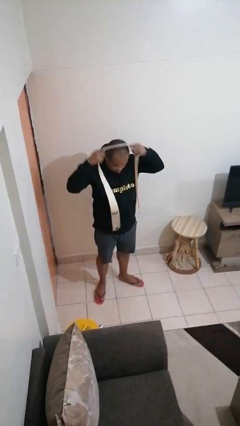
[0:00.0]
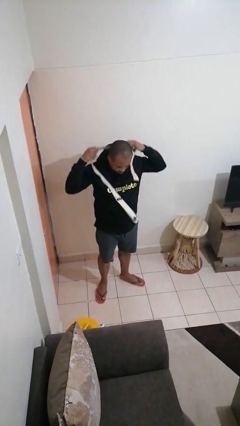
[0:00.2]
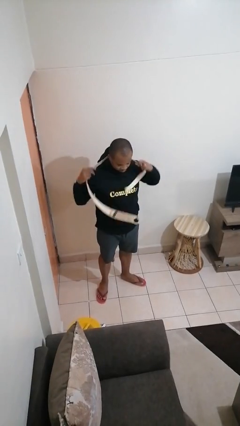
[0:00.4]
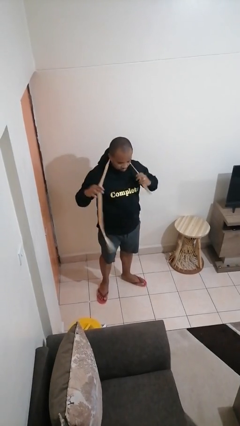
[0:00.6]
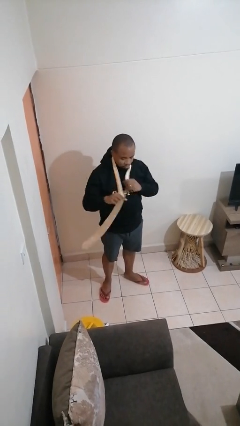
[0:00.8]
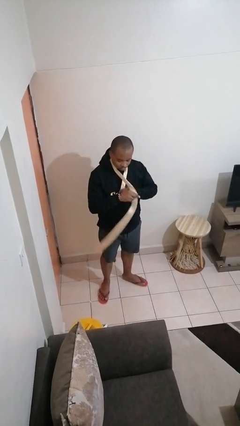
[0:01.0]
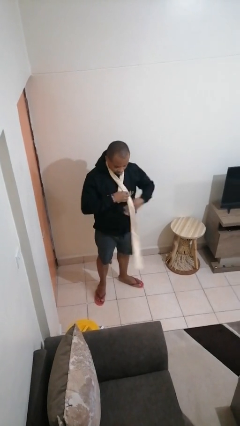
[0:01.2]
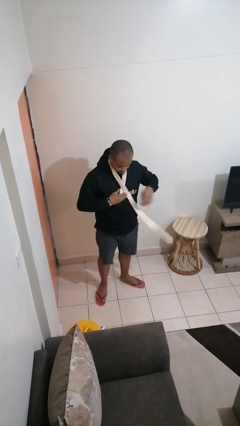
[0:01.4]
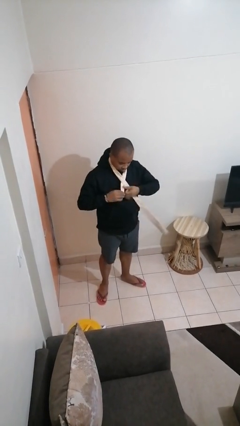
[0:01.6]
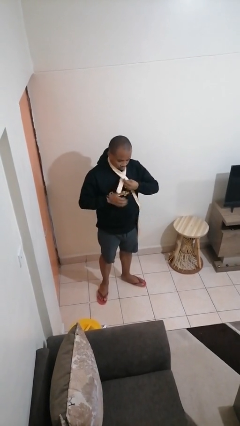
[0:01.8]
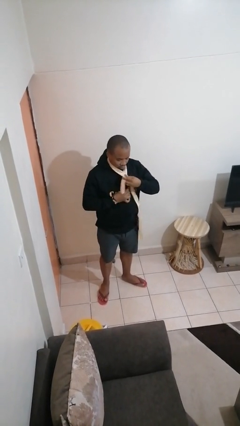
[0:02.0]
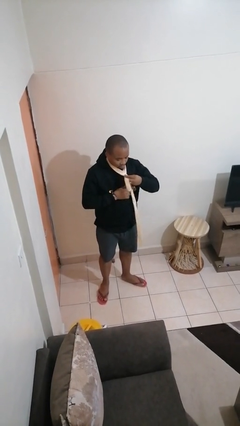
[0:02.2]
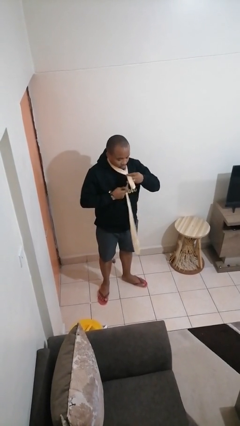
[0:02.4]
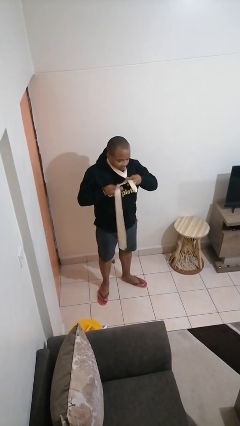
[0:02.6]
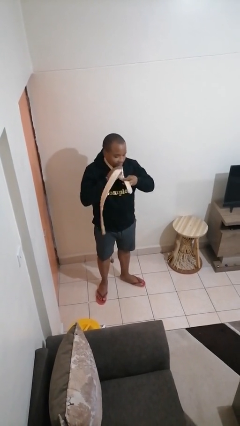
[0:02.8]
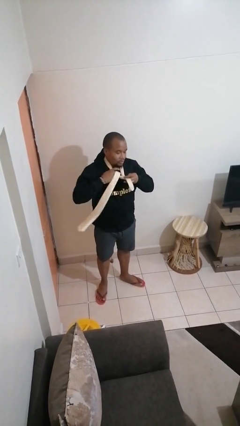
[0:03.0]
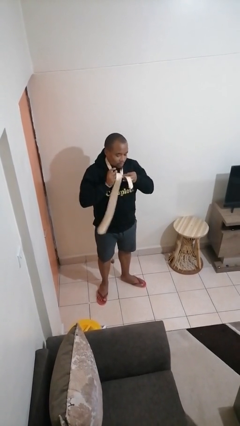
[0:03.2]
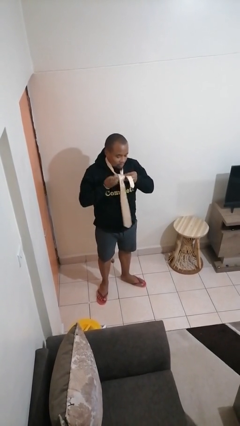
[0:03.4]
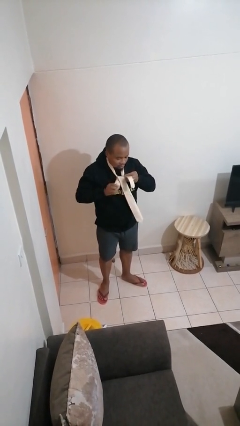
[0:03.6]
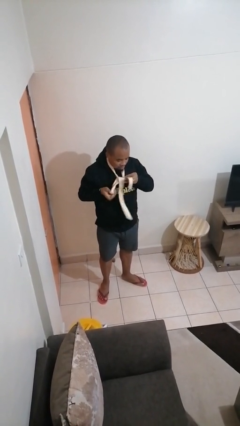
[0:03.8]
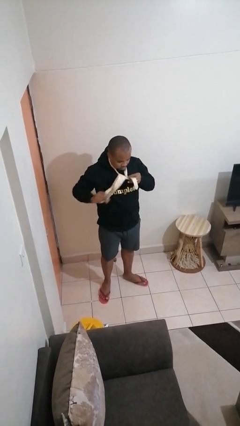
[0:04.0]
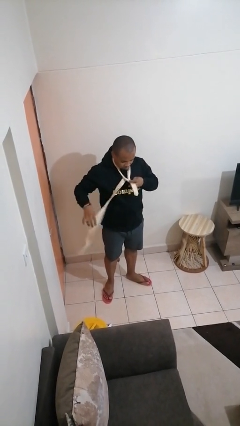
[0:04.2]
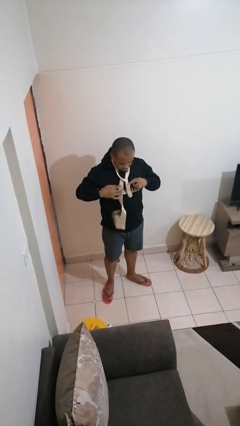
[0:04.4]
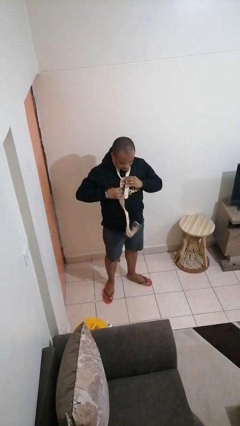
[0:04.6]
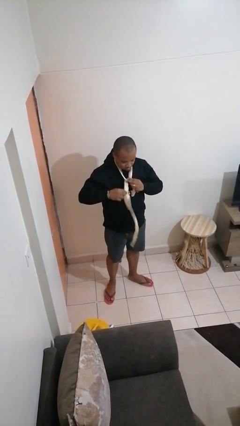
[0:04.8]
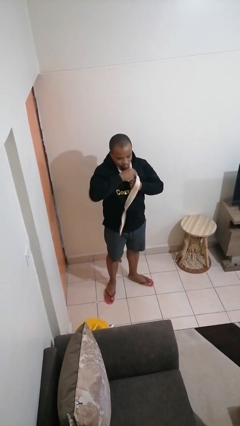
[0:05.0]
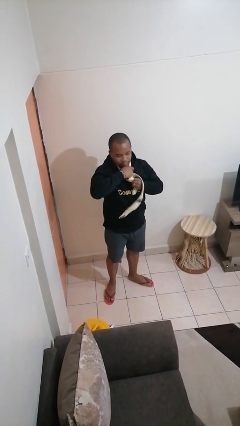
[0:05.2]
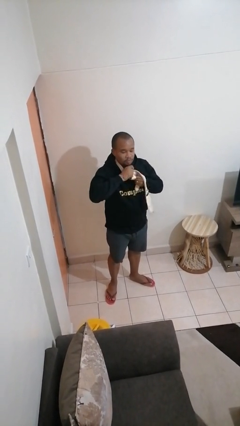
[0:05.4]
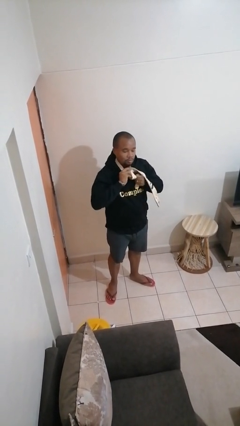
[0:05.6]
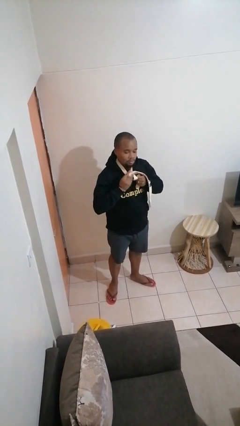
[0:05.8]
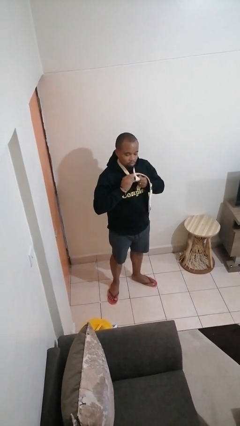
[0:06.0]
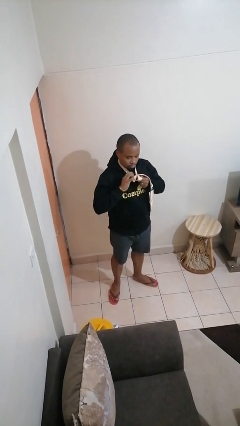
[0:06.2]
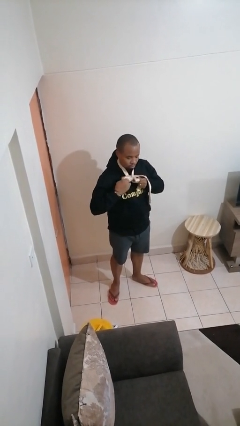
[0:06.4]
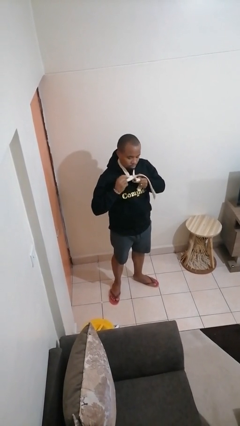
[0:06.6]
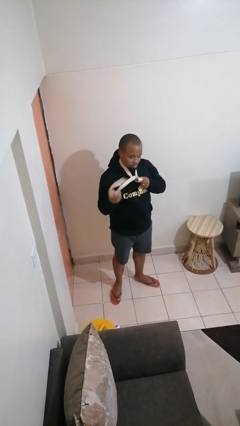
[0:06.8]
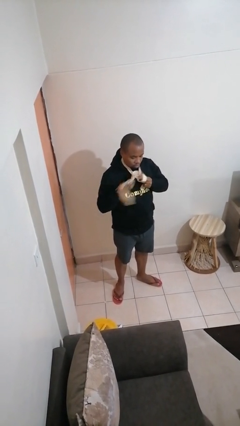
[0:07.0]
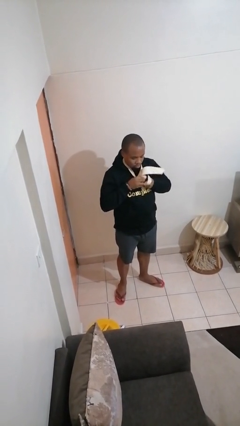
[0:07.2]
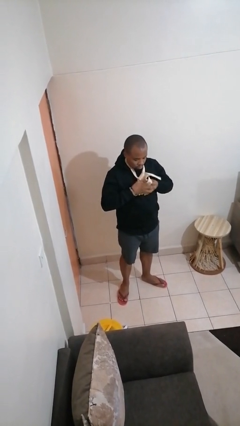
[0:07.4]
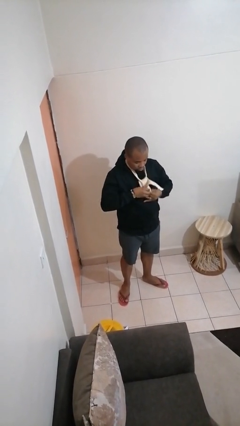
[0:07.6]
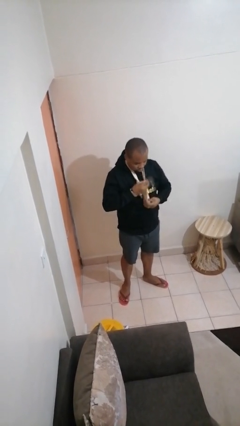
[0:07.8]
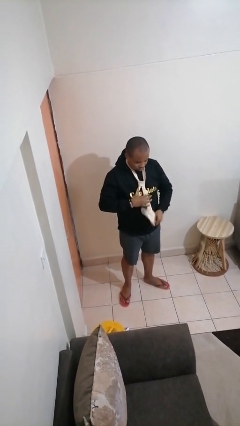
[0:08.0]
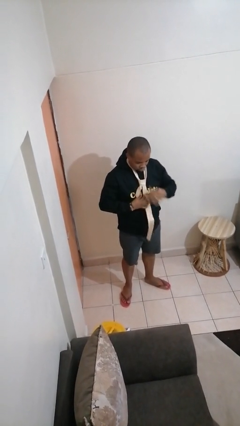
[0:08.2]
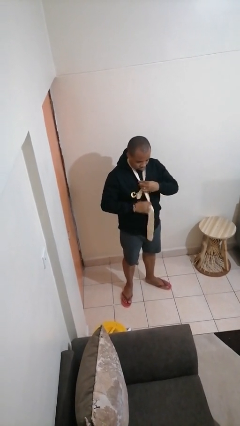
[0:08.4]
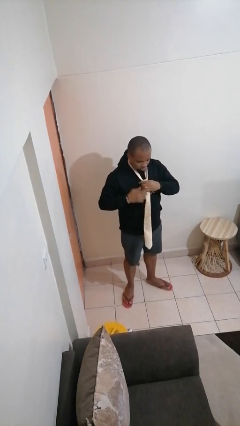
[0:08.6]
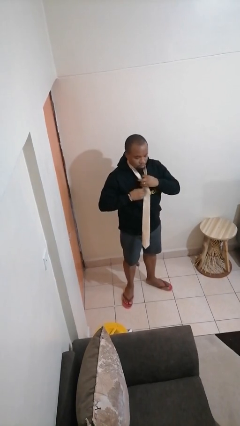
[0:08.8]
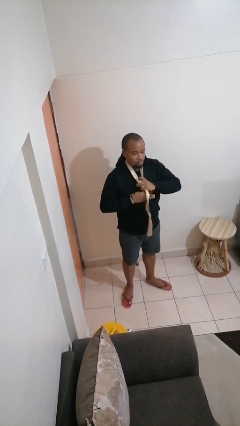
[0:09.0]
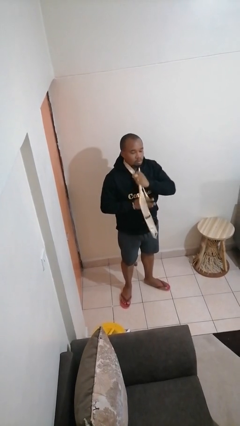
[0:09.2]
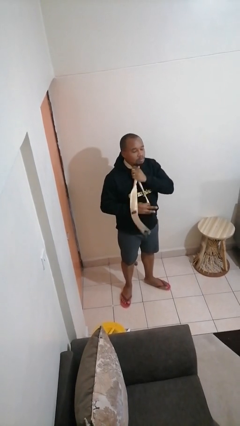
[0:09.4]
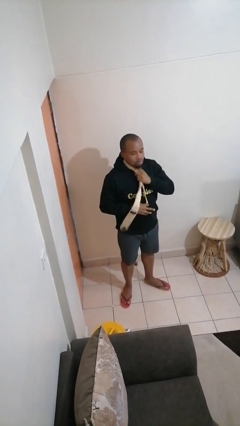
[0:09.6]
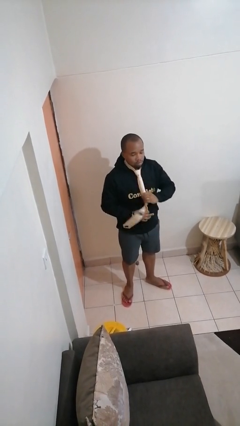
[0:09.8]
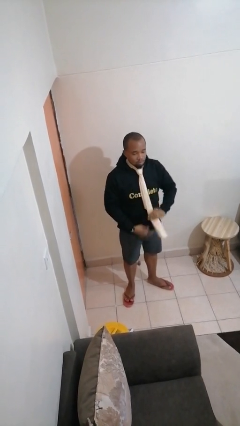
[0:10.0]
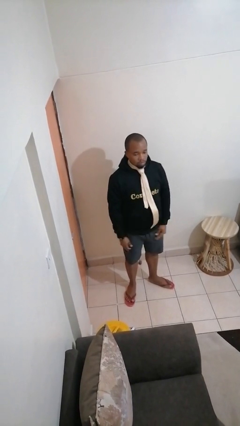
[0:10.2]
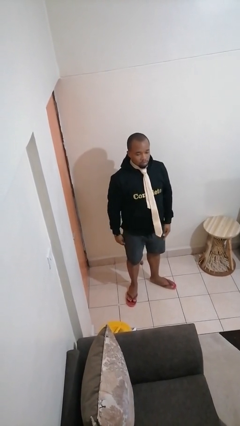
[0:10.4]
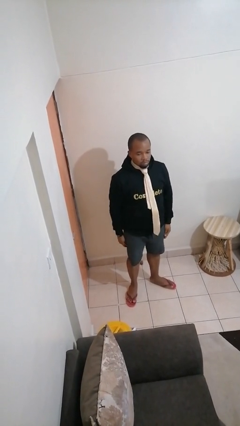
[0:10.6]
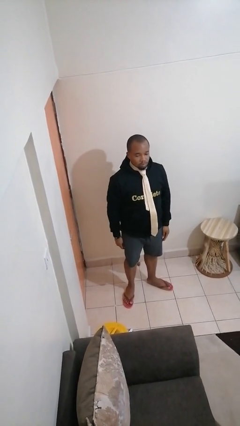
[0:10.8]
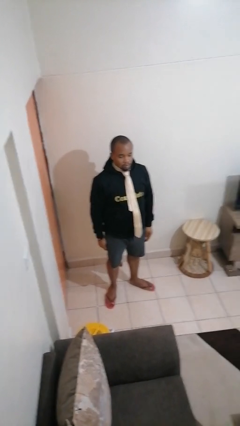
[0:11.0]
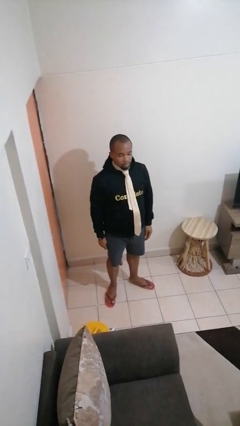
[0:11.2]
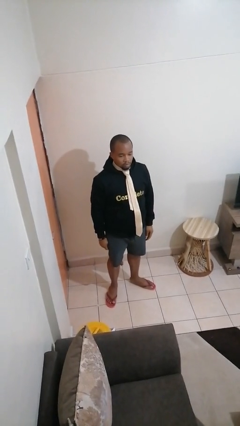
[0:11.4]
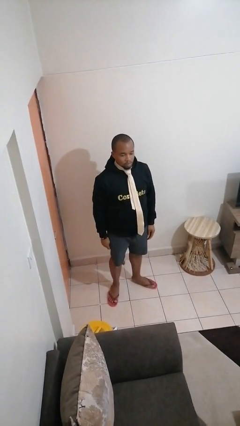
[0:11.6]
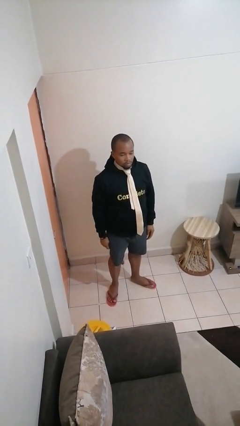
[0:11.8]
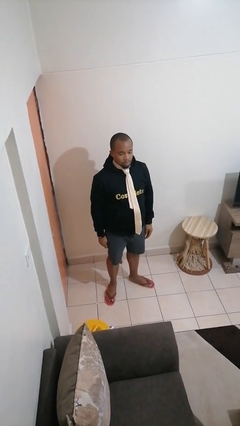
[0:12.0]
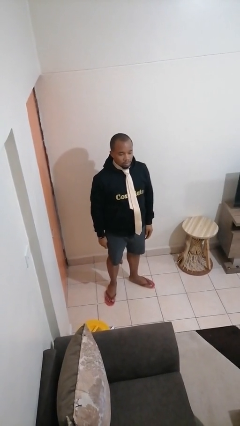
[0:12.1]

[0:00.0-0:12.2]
person puts on necktie

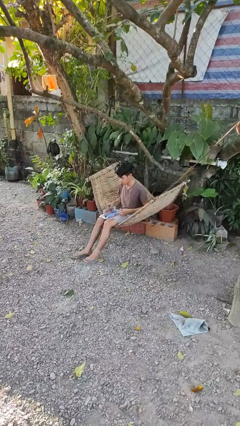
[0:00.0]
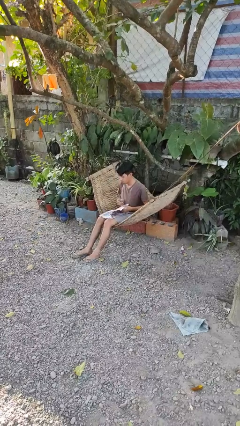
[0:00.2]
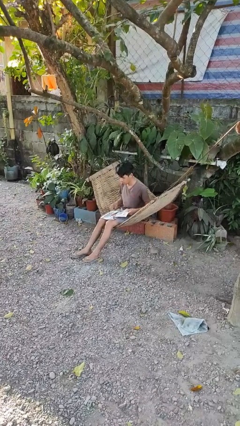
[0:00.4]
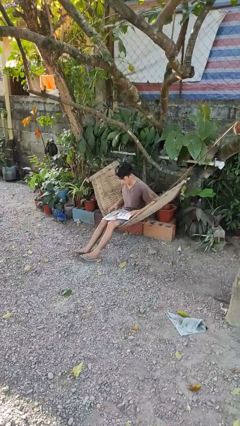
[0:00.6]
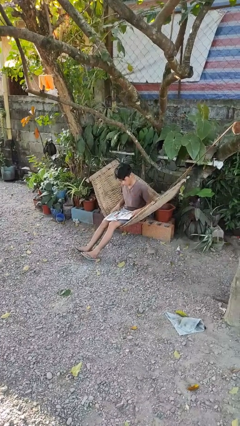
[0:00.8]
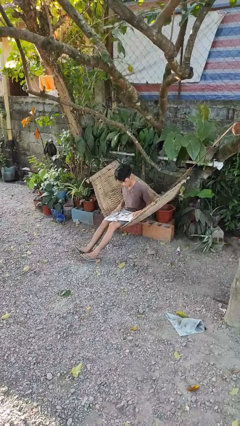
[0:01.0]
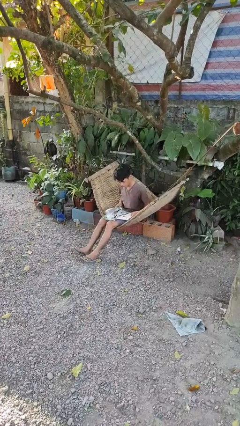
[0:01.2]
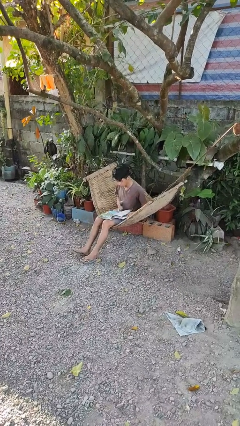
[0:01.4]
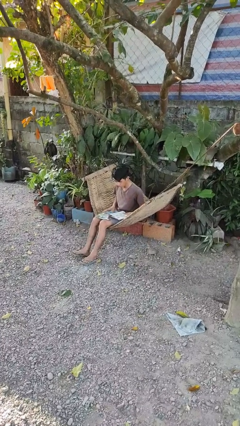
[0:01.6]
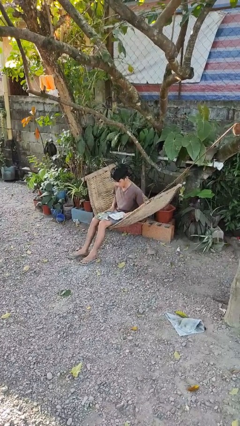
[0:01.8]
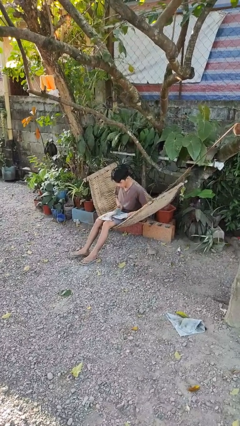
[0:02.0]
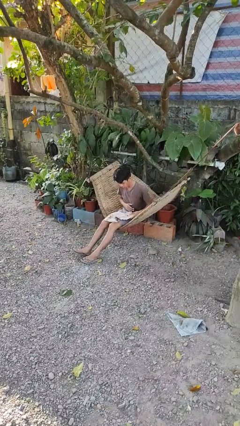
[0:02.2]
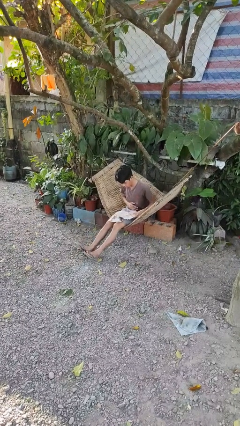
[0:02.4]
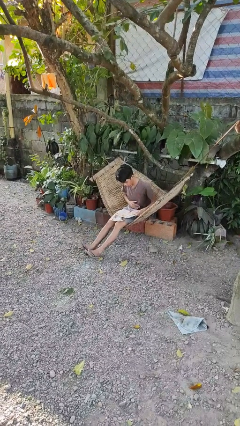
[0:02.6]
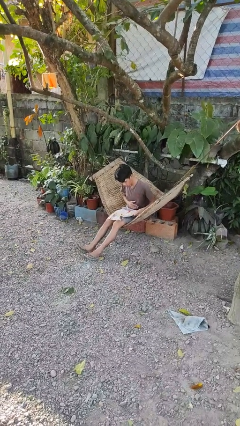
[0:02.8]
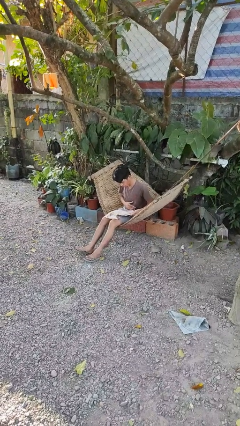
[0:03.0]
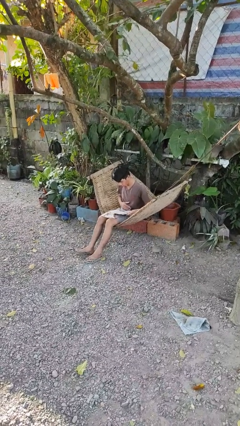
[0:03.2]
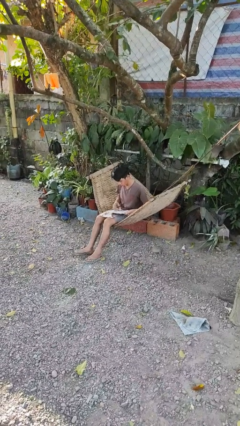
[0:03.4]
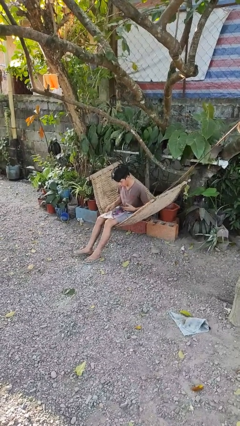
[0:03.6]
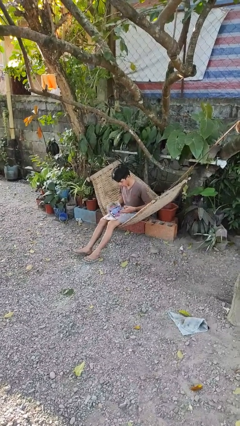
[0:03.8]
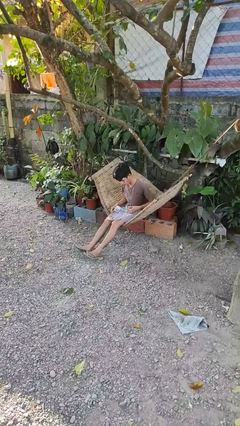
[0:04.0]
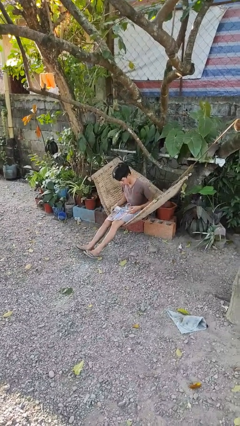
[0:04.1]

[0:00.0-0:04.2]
person reads magazine

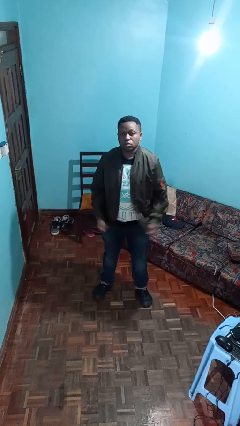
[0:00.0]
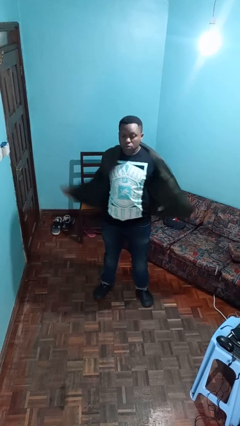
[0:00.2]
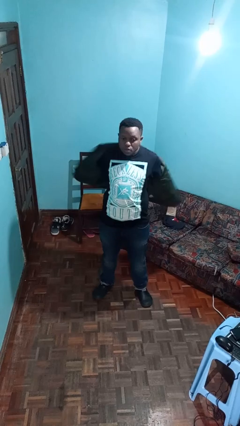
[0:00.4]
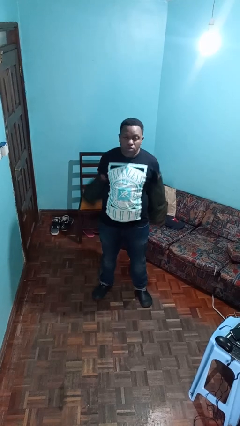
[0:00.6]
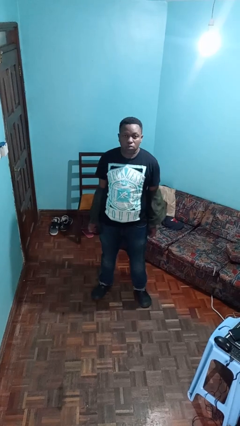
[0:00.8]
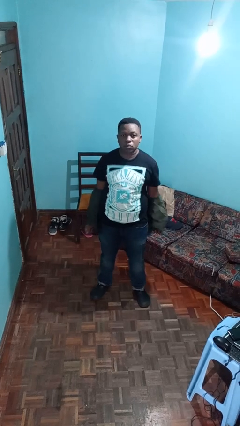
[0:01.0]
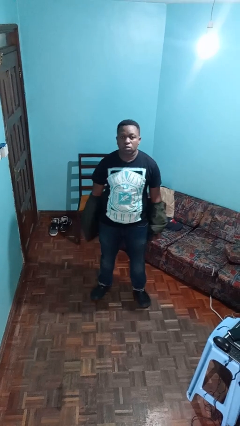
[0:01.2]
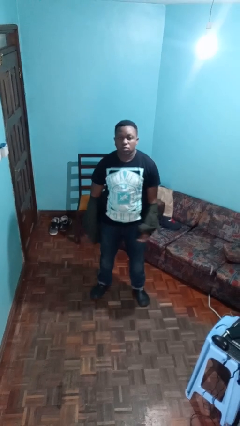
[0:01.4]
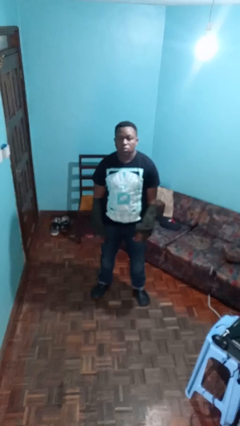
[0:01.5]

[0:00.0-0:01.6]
person takes off jacket

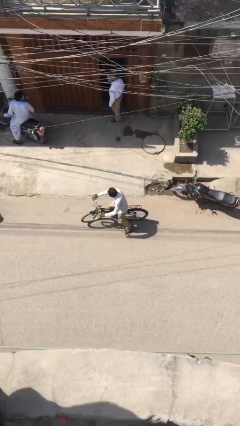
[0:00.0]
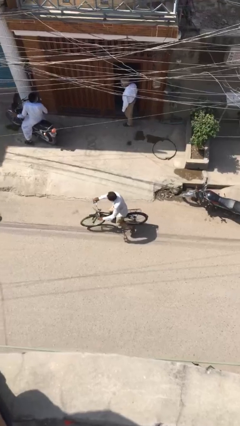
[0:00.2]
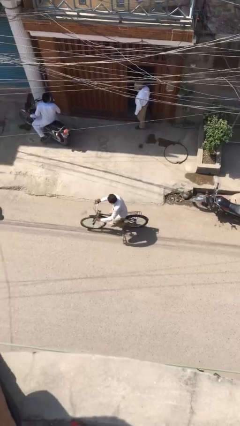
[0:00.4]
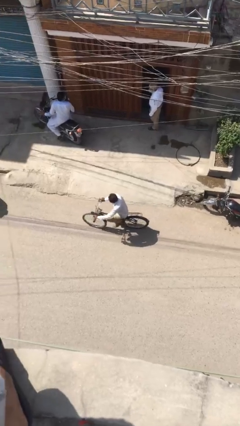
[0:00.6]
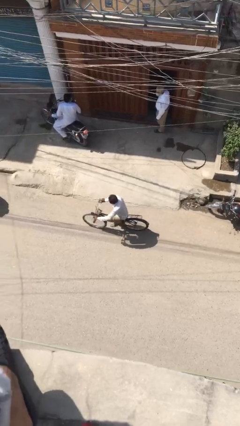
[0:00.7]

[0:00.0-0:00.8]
person rides bicycle
